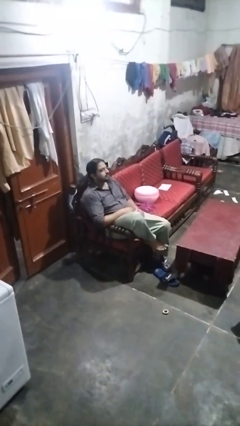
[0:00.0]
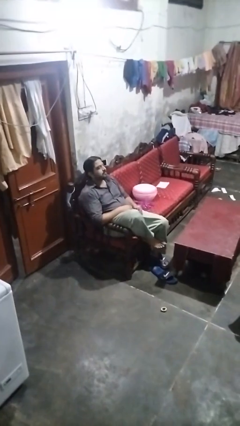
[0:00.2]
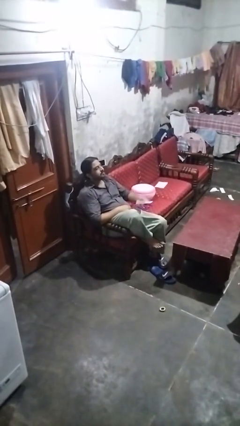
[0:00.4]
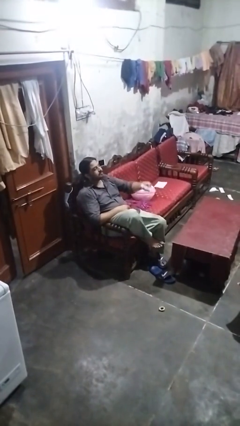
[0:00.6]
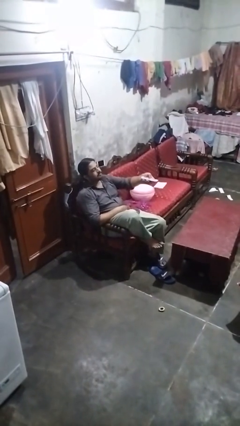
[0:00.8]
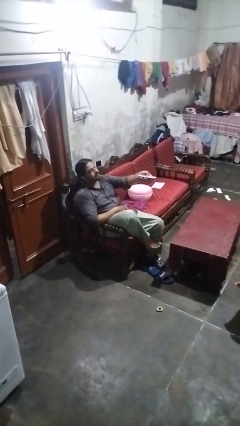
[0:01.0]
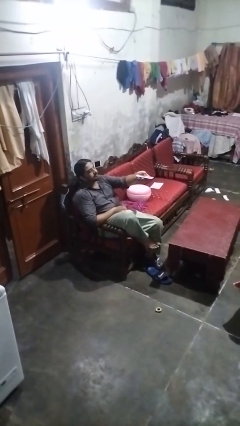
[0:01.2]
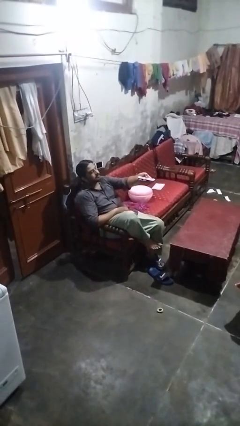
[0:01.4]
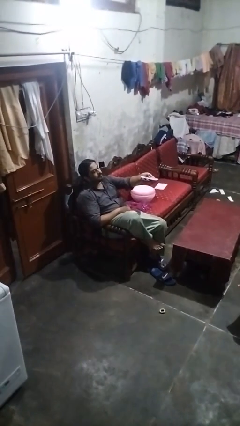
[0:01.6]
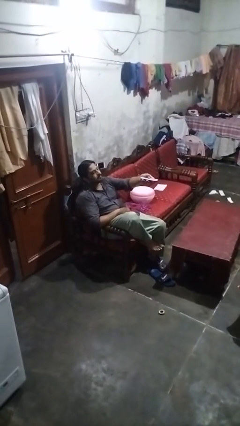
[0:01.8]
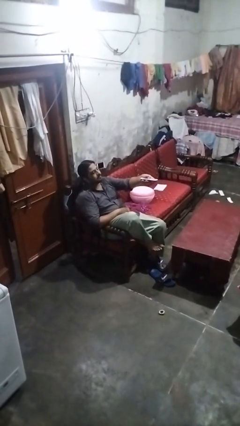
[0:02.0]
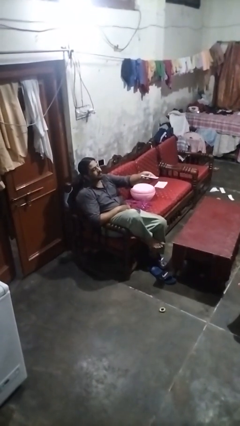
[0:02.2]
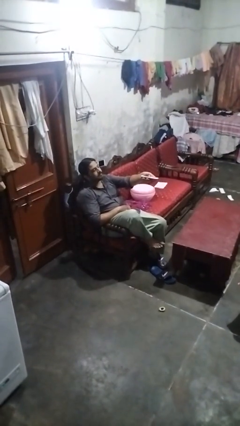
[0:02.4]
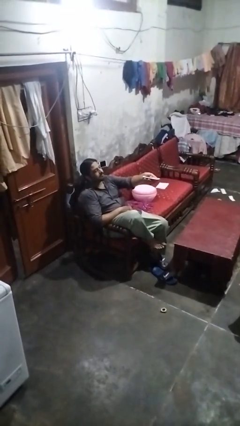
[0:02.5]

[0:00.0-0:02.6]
person uses television remote

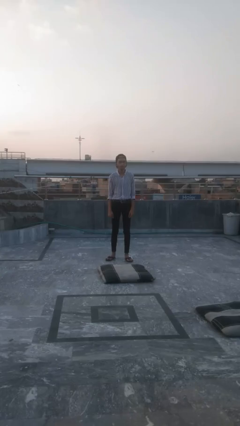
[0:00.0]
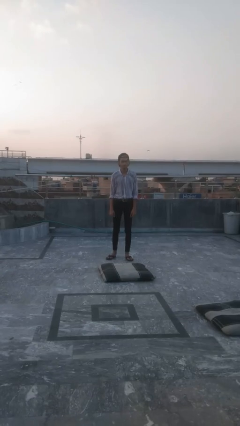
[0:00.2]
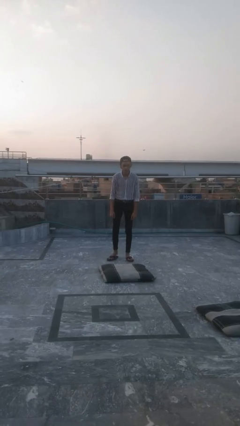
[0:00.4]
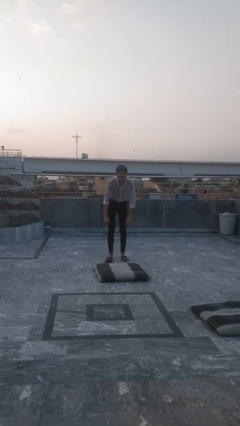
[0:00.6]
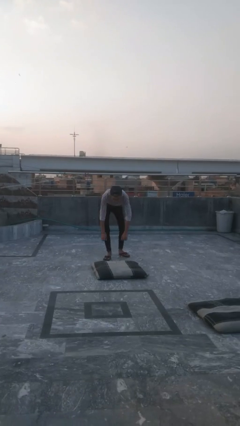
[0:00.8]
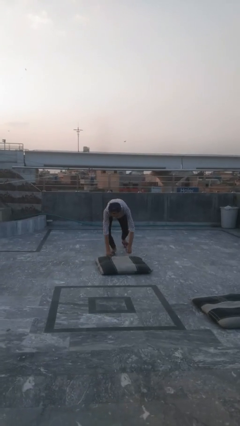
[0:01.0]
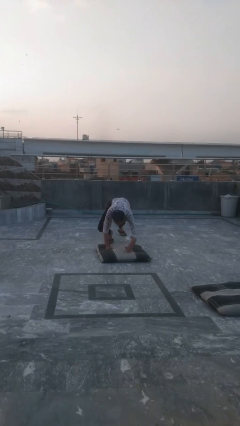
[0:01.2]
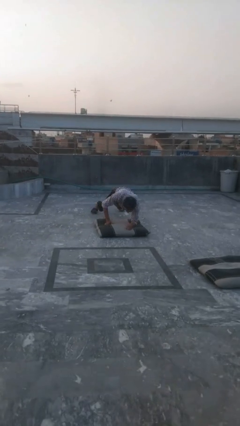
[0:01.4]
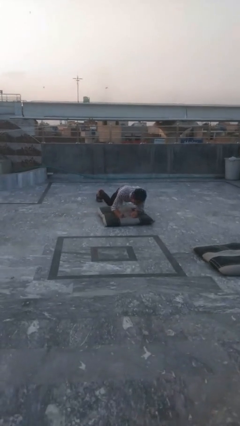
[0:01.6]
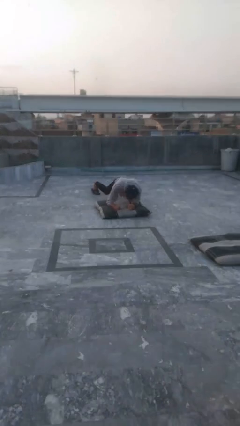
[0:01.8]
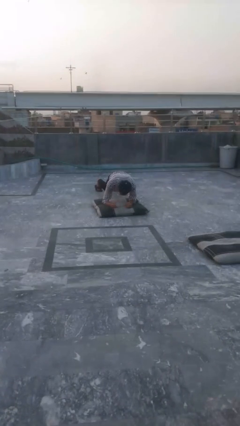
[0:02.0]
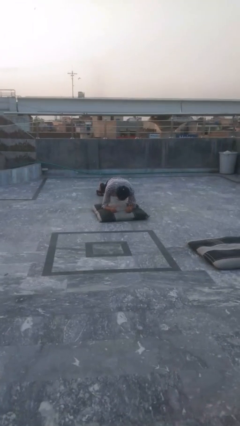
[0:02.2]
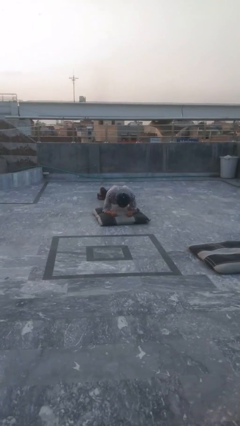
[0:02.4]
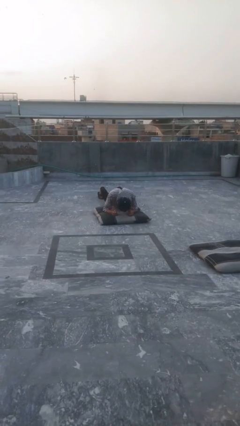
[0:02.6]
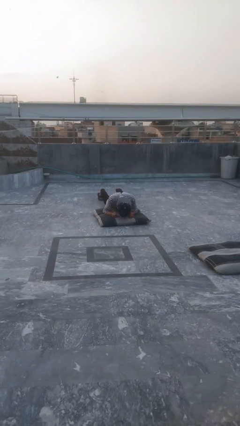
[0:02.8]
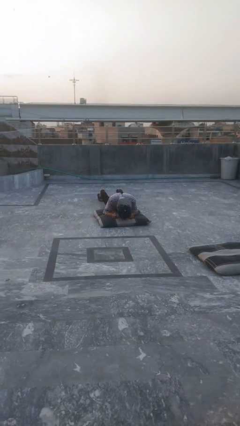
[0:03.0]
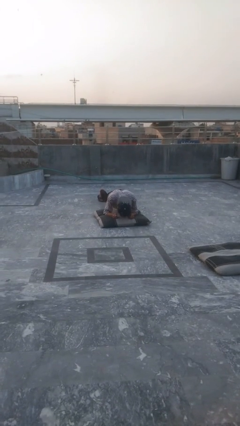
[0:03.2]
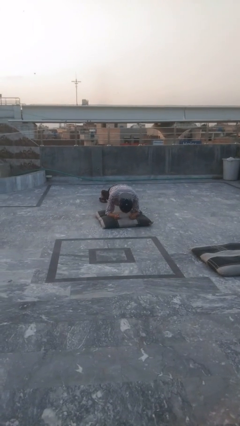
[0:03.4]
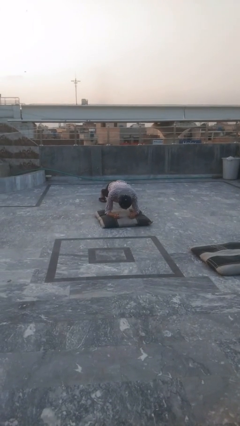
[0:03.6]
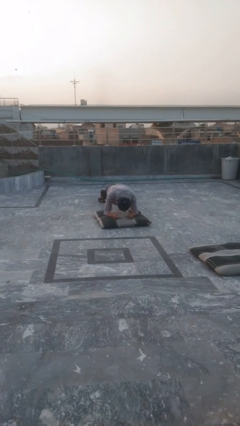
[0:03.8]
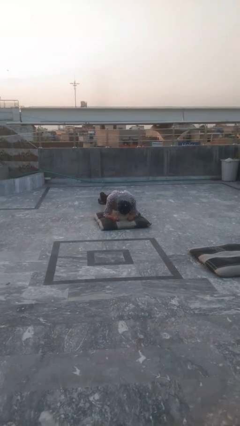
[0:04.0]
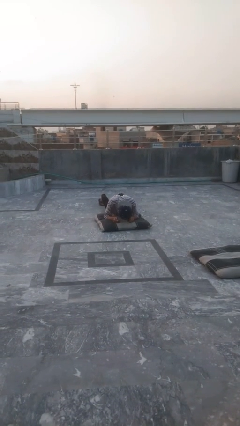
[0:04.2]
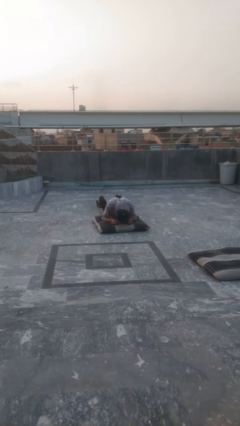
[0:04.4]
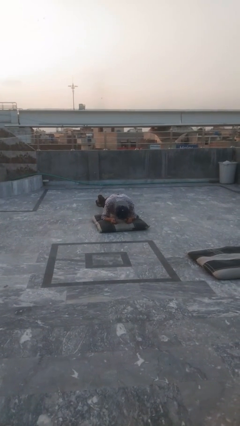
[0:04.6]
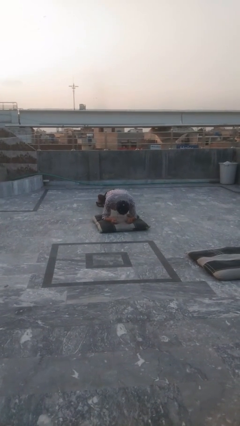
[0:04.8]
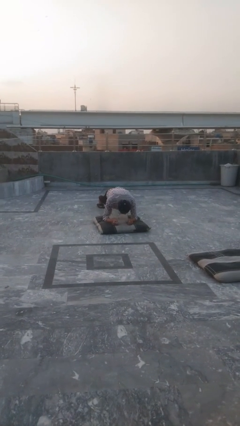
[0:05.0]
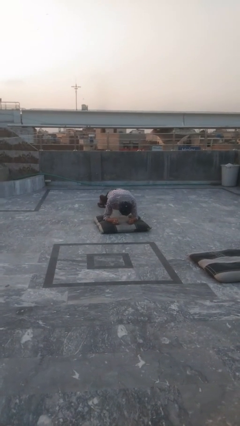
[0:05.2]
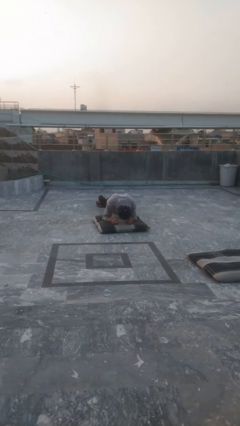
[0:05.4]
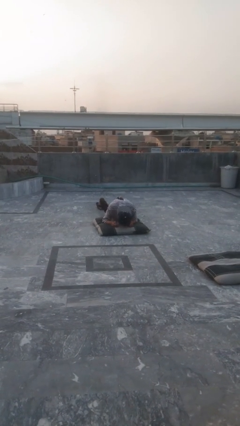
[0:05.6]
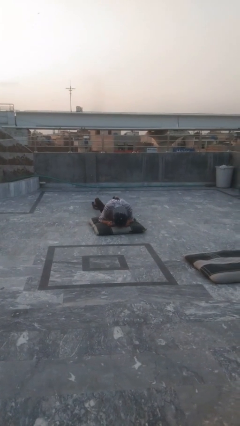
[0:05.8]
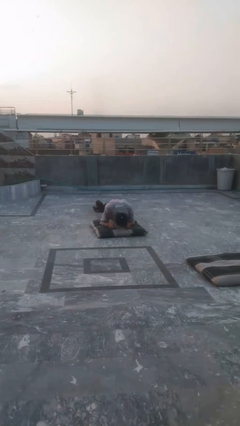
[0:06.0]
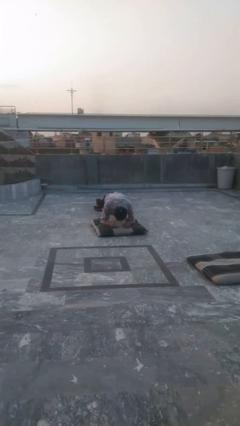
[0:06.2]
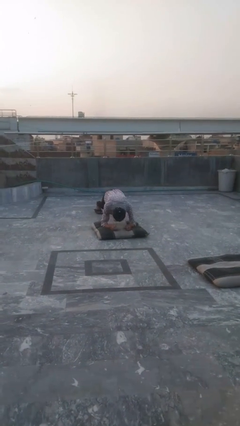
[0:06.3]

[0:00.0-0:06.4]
person exercises with plank

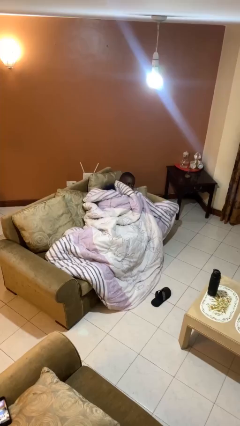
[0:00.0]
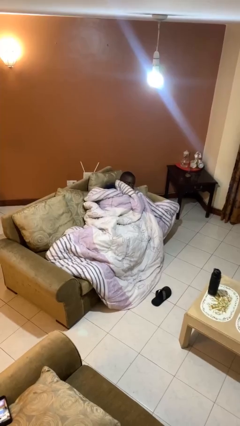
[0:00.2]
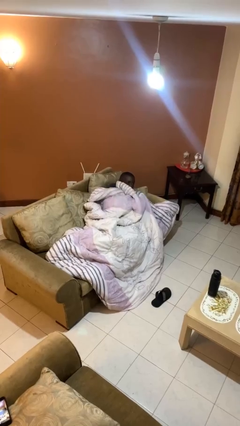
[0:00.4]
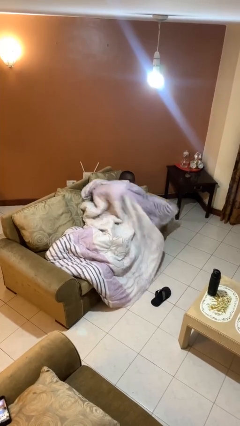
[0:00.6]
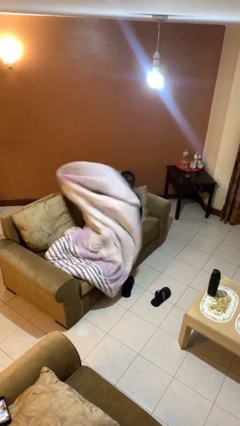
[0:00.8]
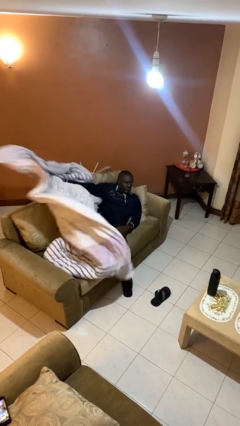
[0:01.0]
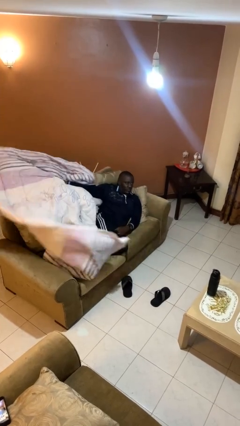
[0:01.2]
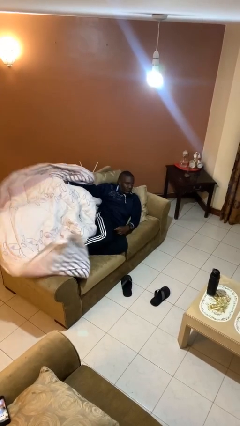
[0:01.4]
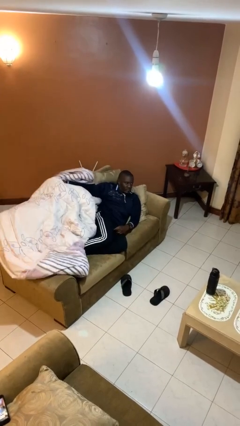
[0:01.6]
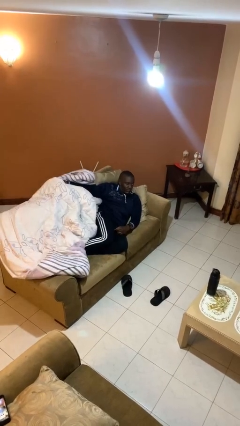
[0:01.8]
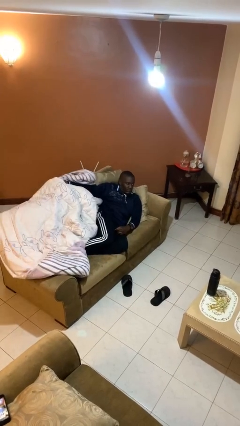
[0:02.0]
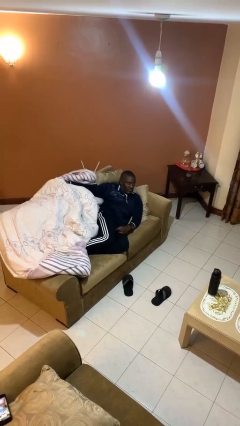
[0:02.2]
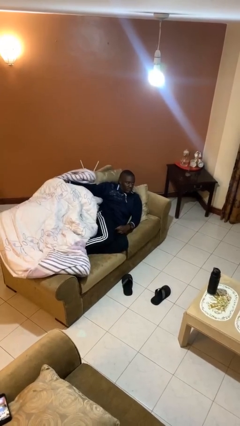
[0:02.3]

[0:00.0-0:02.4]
person uncovers with blanket

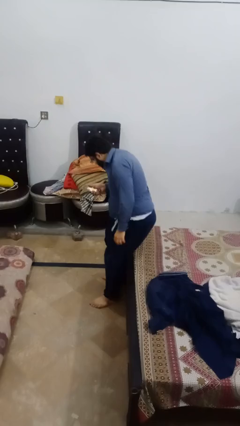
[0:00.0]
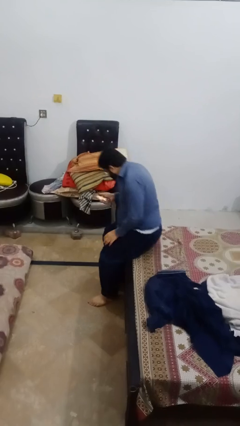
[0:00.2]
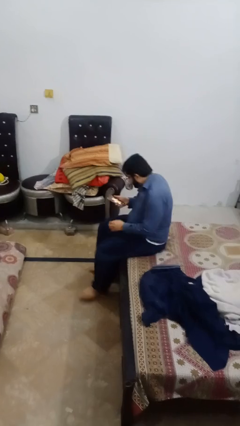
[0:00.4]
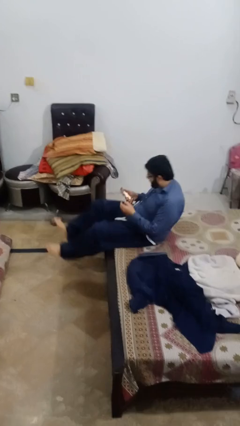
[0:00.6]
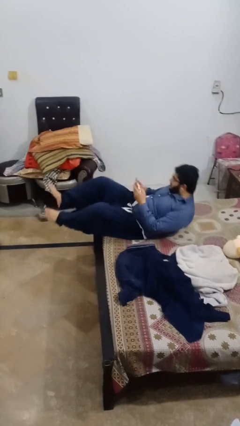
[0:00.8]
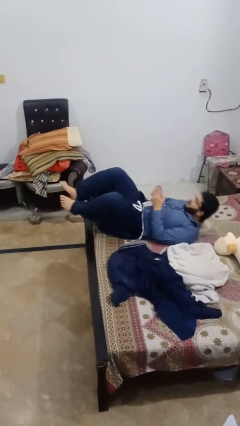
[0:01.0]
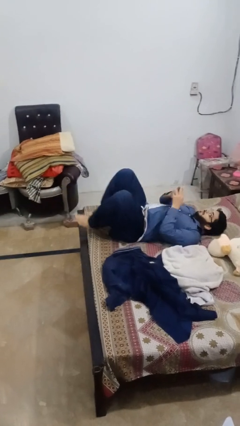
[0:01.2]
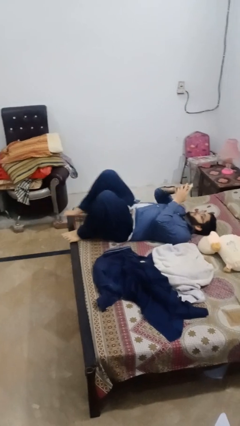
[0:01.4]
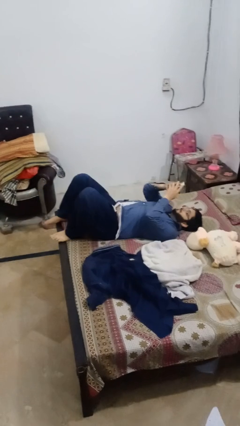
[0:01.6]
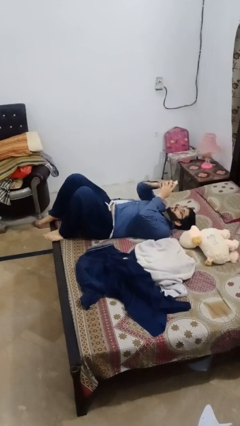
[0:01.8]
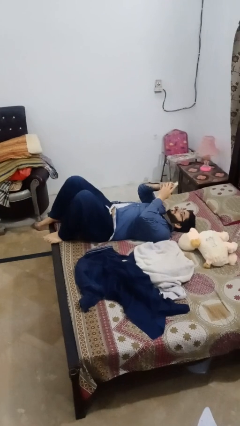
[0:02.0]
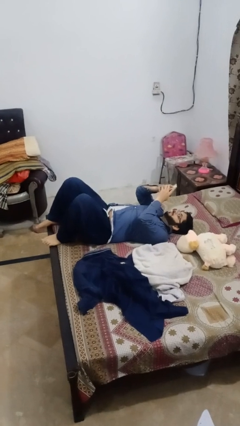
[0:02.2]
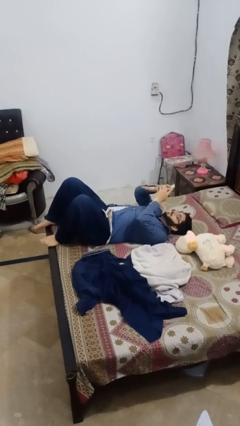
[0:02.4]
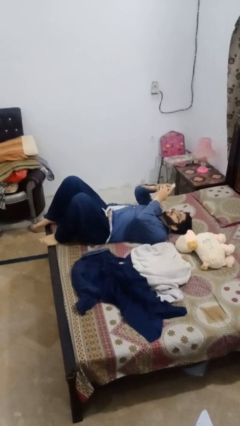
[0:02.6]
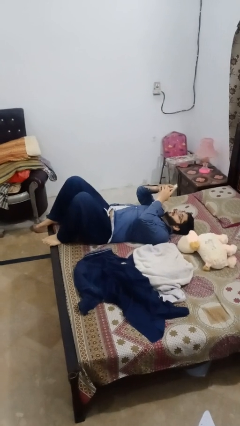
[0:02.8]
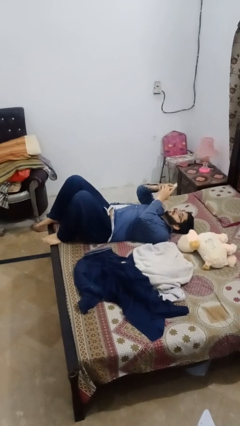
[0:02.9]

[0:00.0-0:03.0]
person lies down on bed

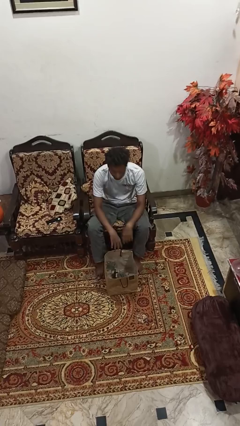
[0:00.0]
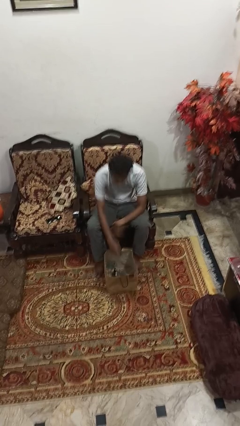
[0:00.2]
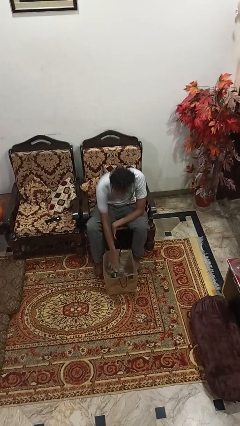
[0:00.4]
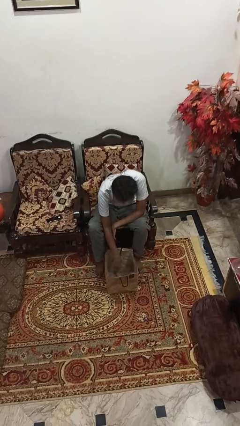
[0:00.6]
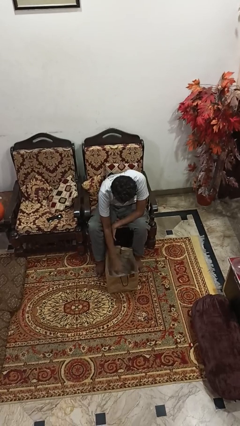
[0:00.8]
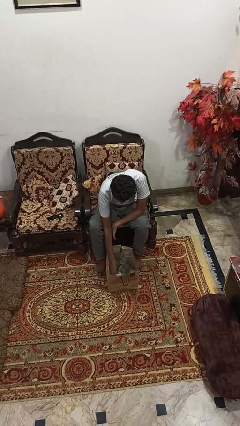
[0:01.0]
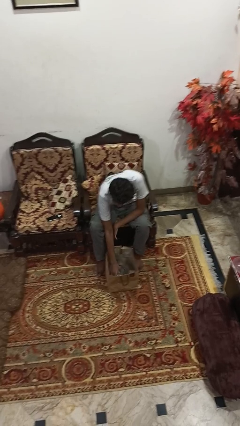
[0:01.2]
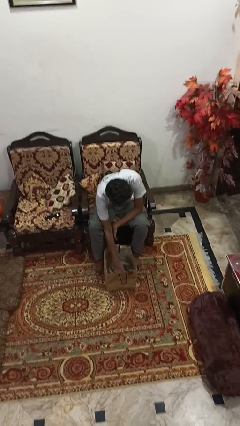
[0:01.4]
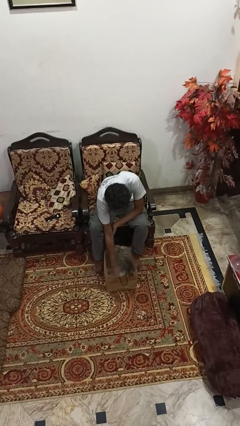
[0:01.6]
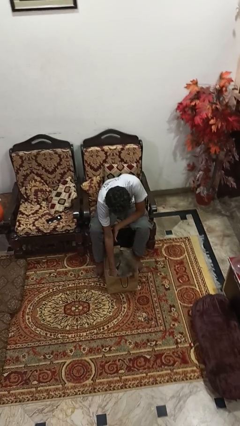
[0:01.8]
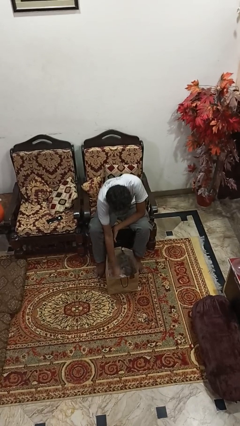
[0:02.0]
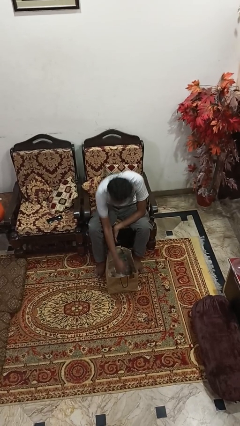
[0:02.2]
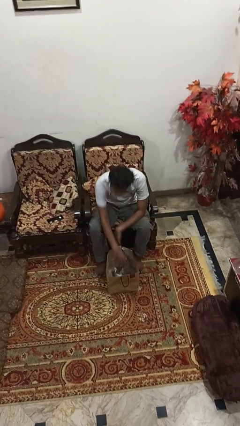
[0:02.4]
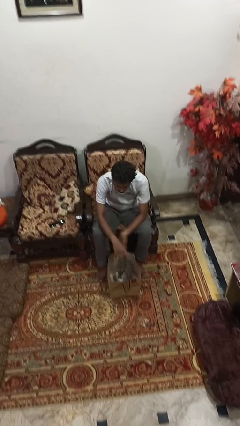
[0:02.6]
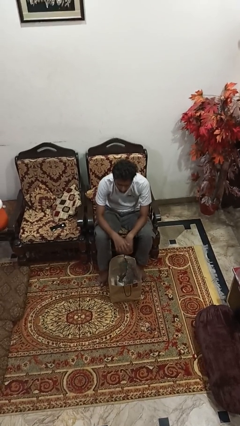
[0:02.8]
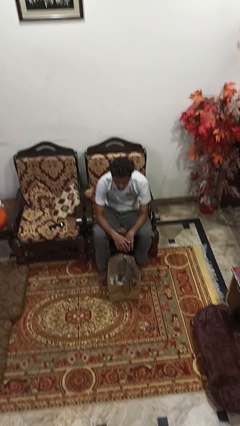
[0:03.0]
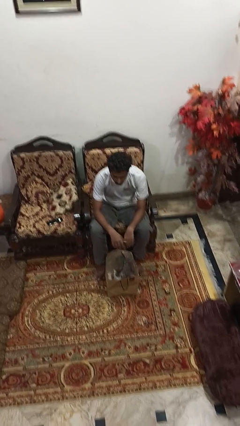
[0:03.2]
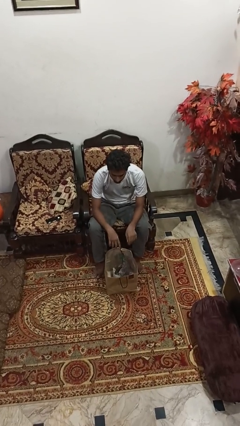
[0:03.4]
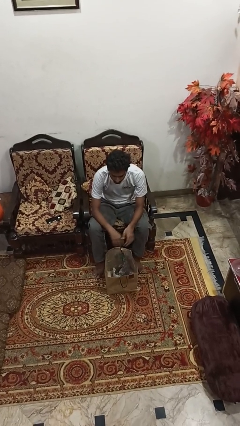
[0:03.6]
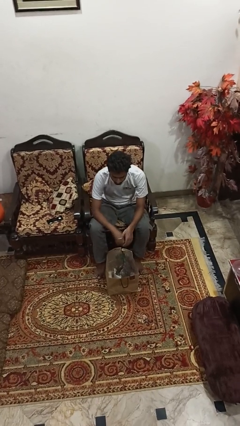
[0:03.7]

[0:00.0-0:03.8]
person searches in bag
